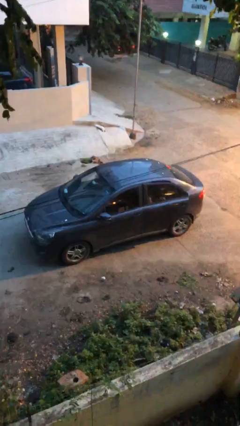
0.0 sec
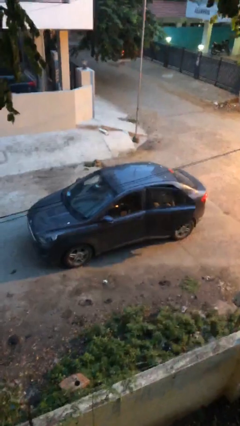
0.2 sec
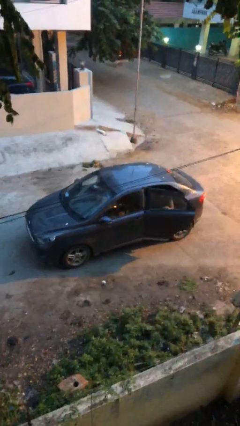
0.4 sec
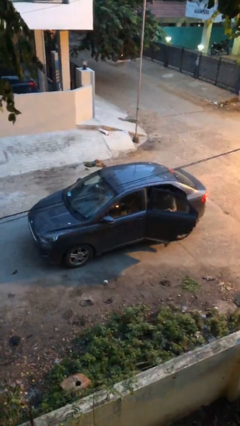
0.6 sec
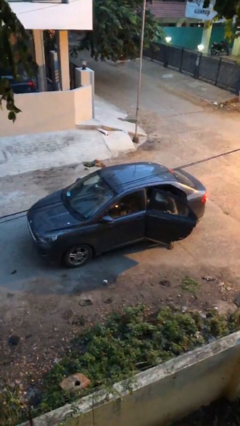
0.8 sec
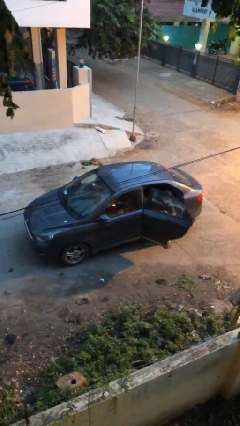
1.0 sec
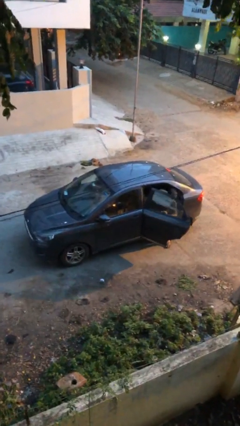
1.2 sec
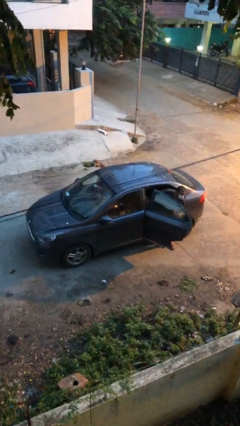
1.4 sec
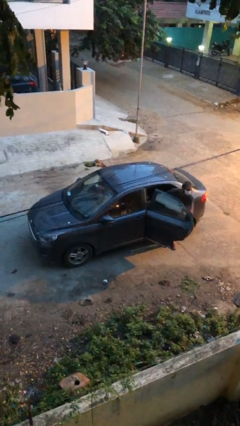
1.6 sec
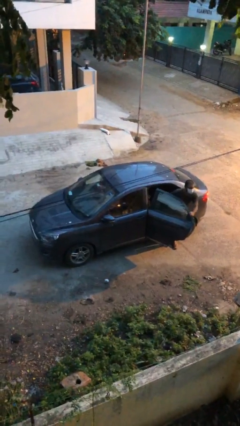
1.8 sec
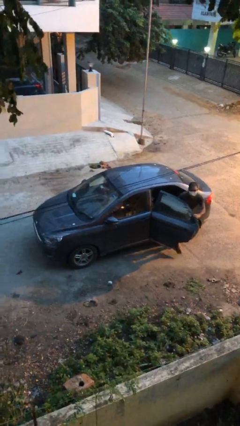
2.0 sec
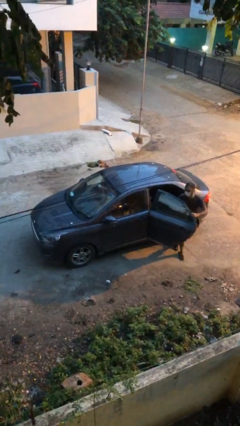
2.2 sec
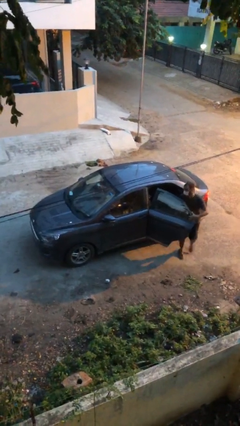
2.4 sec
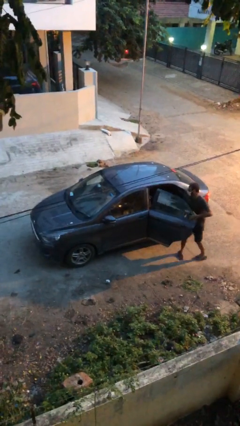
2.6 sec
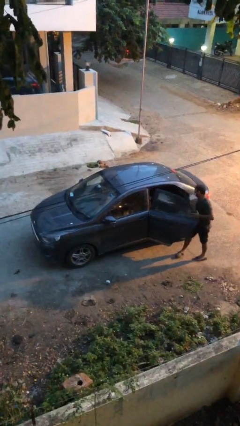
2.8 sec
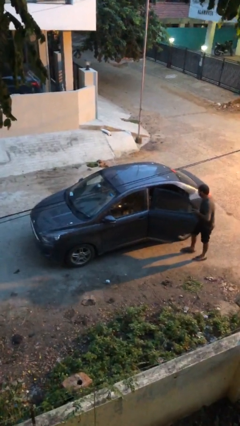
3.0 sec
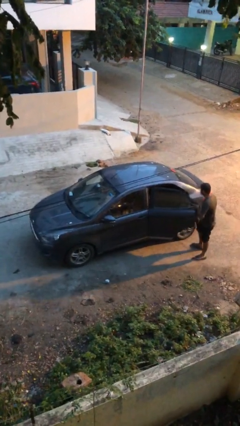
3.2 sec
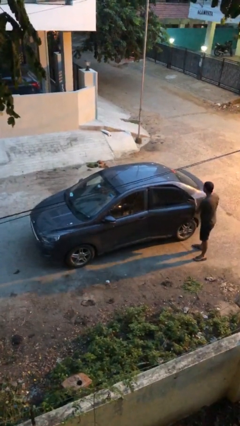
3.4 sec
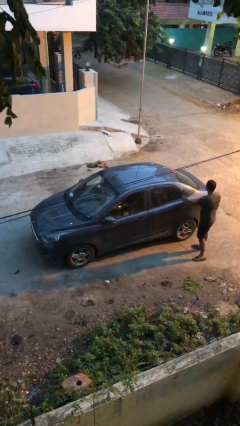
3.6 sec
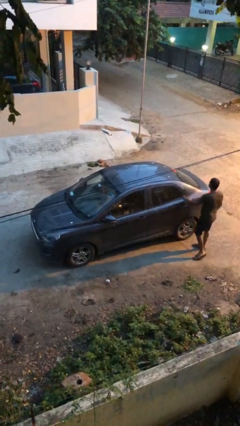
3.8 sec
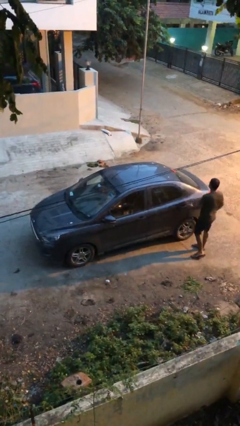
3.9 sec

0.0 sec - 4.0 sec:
car drops off person

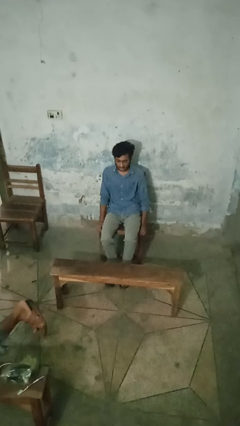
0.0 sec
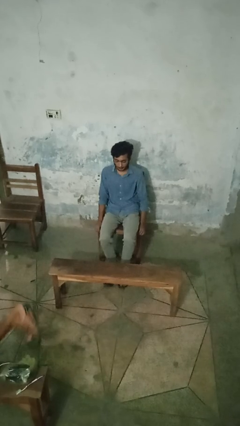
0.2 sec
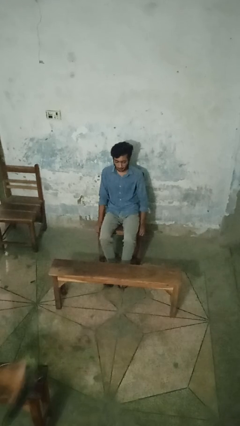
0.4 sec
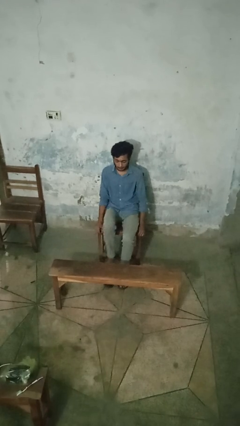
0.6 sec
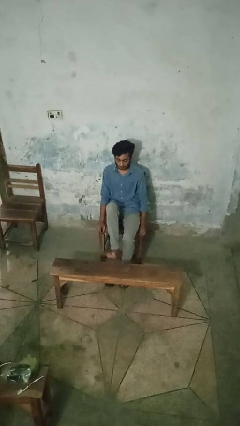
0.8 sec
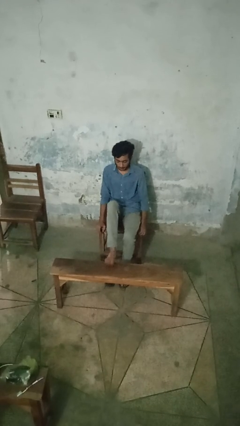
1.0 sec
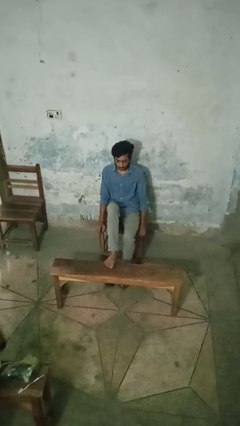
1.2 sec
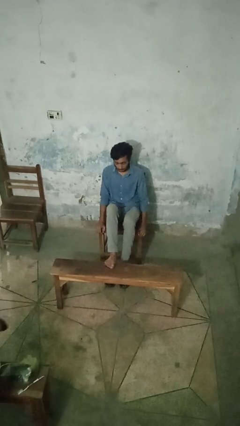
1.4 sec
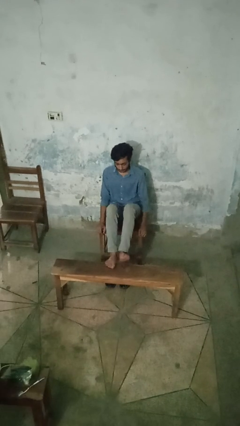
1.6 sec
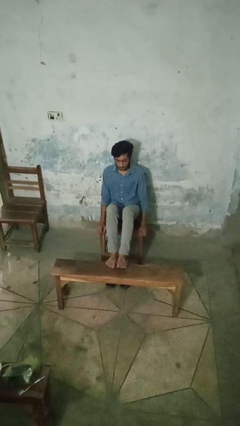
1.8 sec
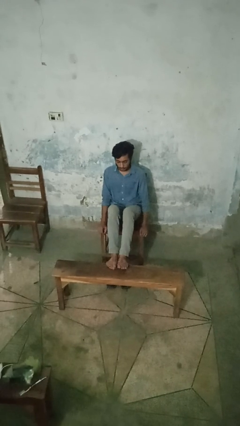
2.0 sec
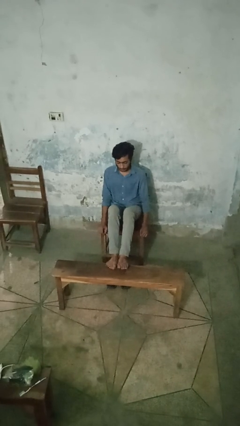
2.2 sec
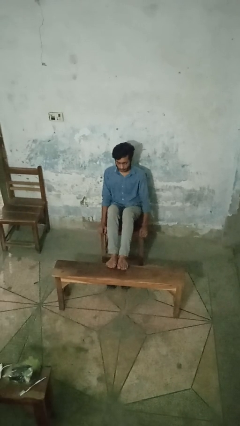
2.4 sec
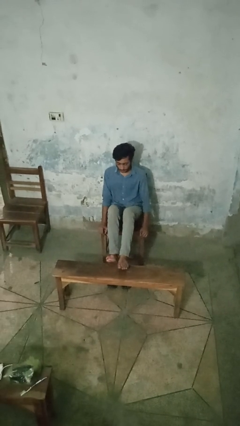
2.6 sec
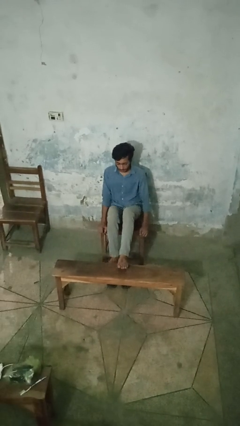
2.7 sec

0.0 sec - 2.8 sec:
person puts feet up

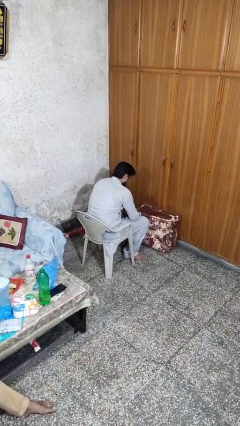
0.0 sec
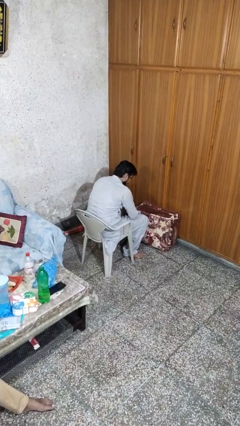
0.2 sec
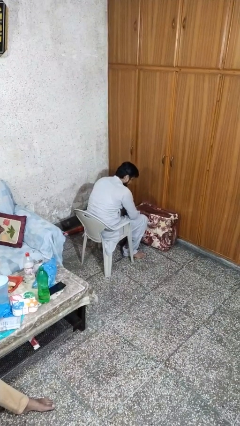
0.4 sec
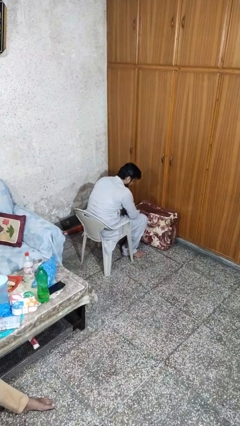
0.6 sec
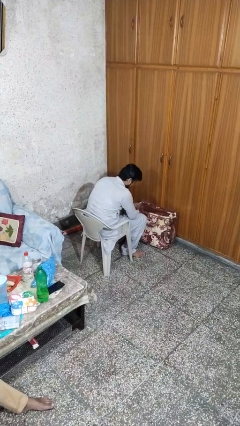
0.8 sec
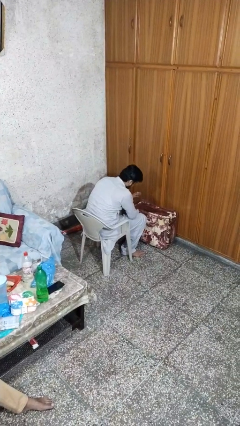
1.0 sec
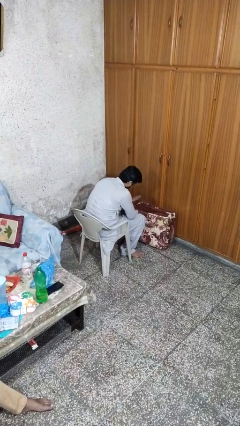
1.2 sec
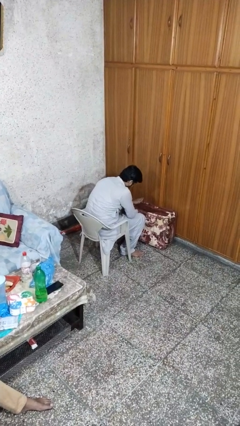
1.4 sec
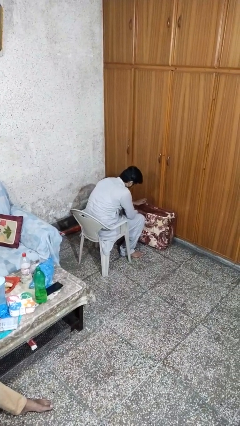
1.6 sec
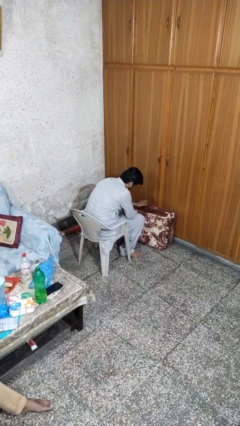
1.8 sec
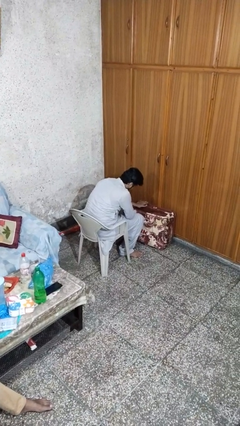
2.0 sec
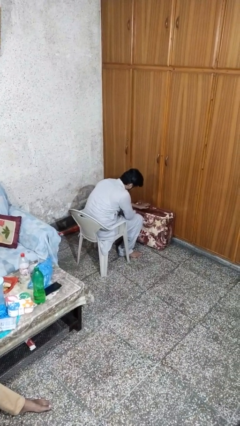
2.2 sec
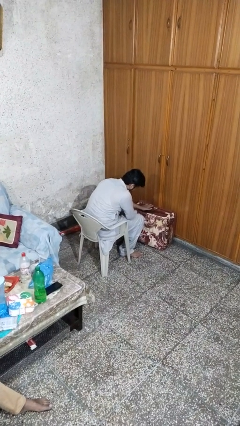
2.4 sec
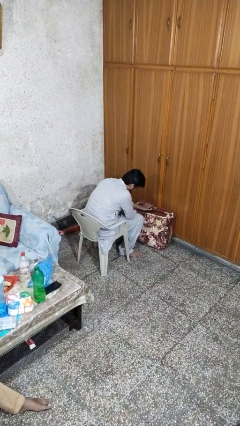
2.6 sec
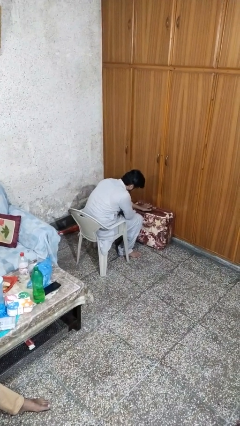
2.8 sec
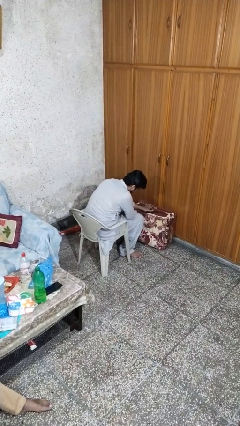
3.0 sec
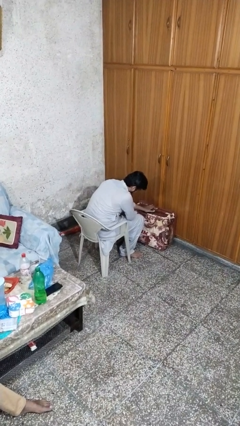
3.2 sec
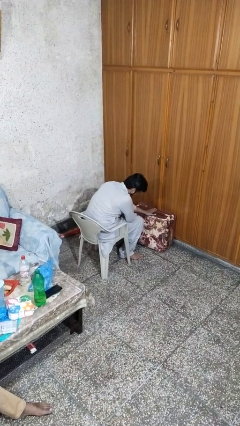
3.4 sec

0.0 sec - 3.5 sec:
person waves hand over object

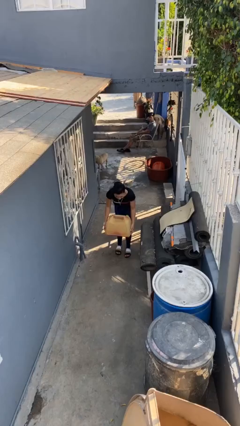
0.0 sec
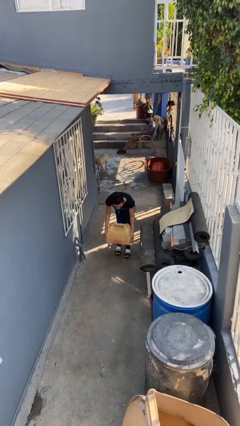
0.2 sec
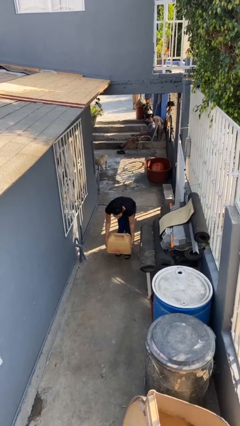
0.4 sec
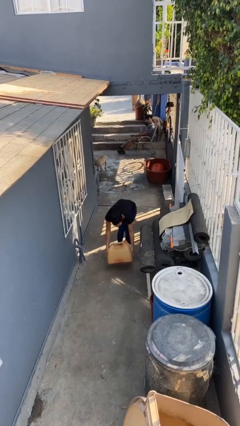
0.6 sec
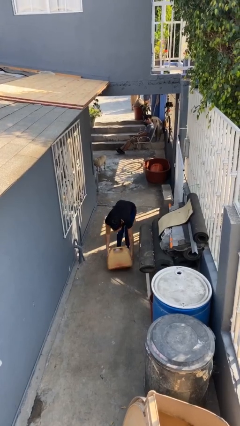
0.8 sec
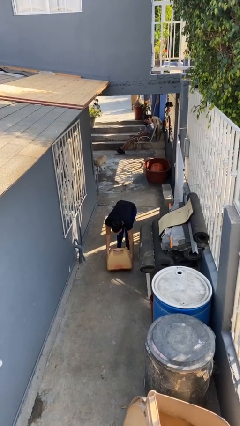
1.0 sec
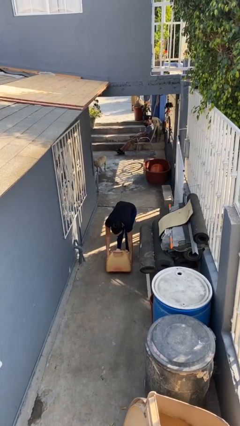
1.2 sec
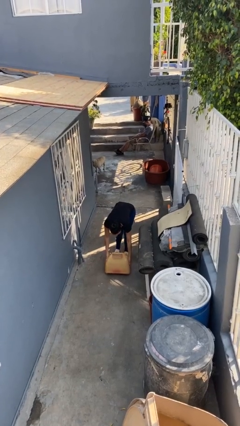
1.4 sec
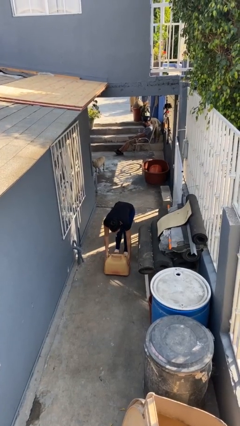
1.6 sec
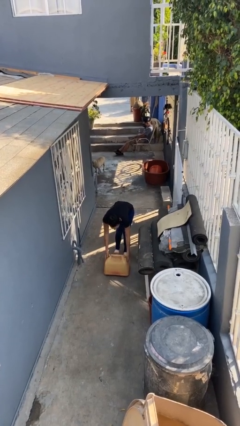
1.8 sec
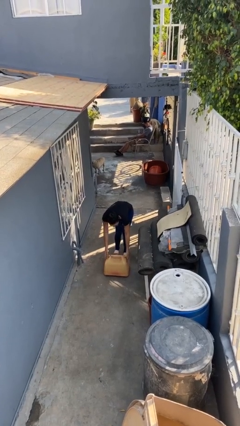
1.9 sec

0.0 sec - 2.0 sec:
person puts down object on floor

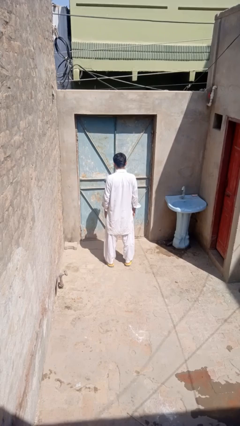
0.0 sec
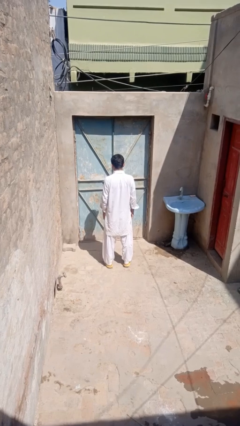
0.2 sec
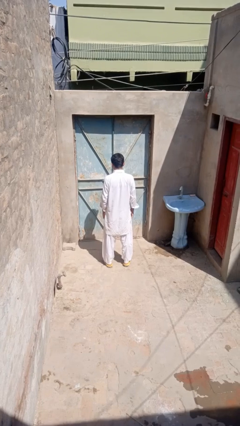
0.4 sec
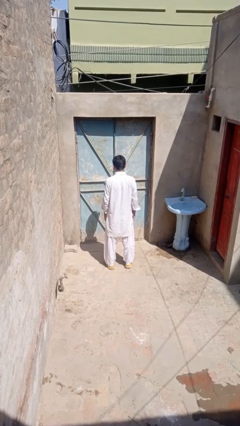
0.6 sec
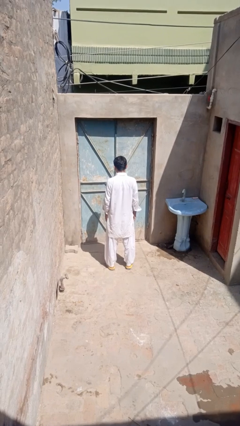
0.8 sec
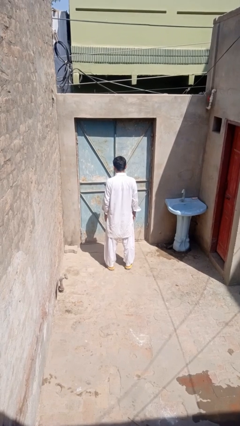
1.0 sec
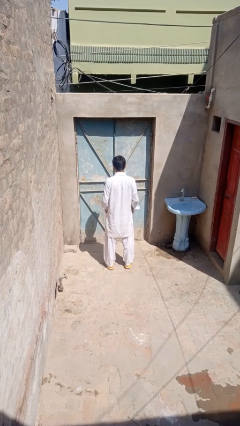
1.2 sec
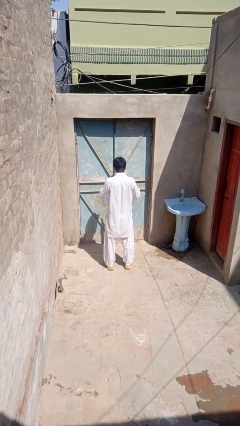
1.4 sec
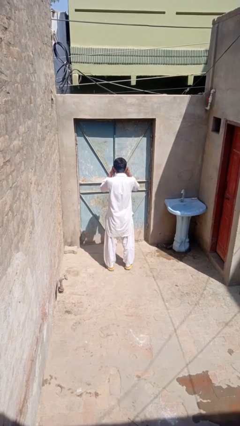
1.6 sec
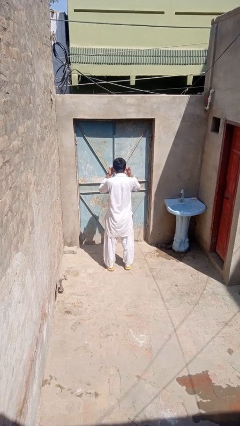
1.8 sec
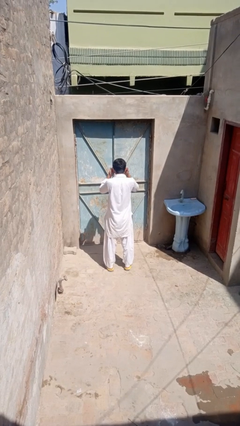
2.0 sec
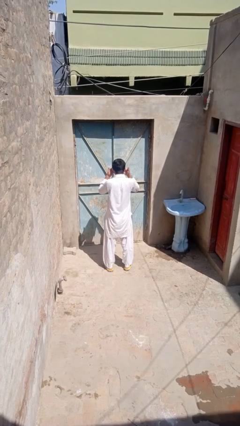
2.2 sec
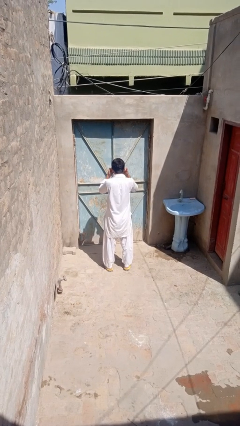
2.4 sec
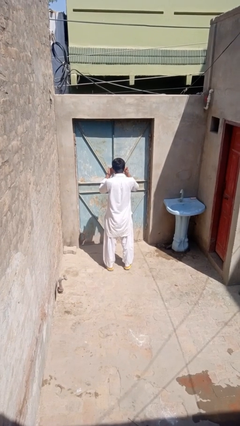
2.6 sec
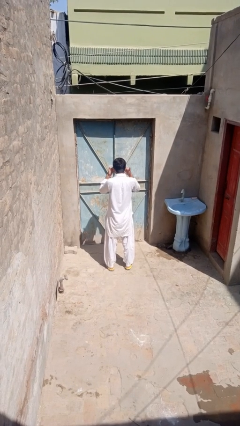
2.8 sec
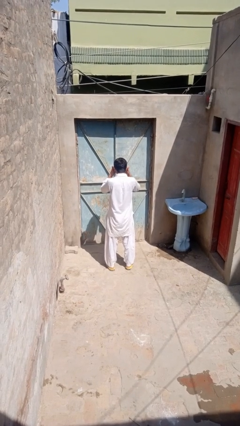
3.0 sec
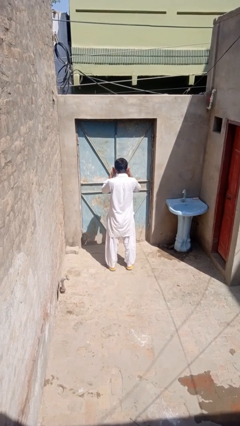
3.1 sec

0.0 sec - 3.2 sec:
person rubs eyes

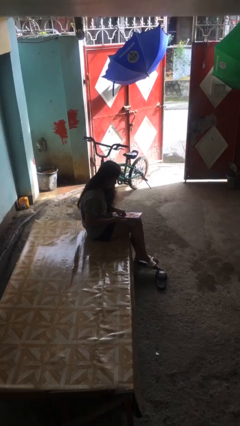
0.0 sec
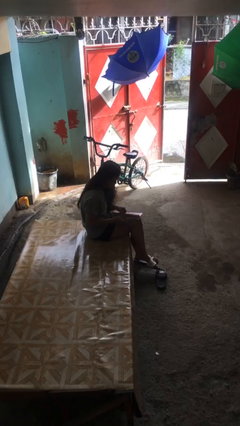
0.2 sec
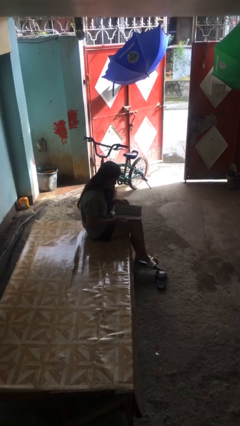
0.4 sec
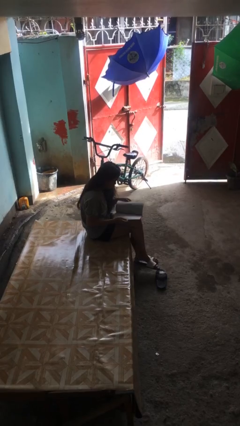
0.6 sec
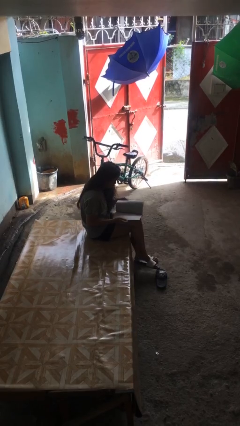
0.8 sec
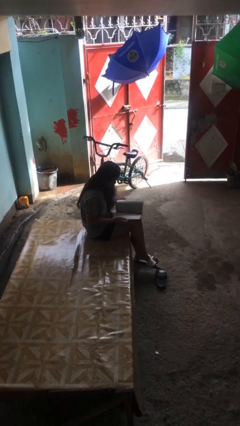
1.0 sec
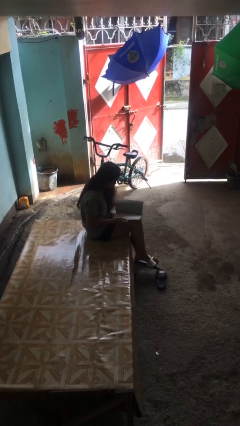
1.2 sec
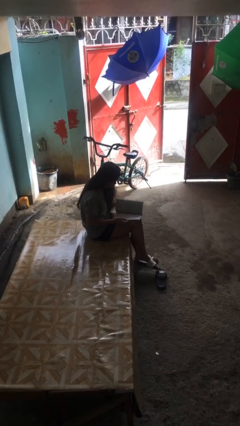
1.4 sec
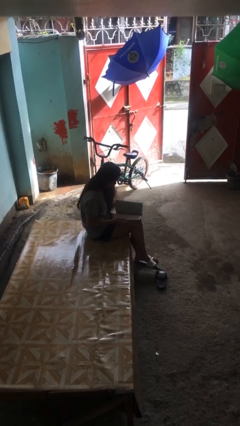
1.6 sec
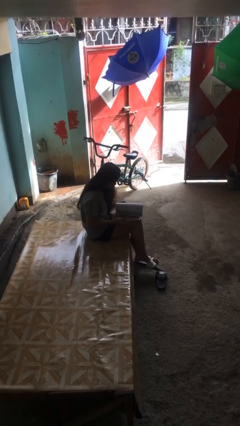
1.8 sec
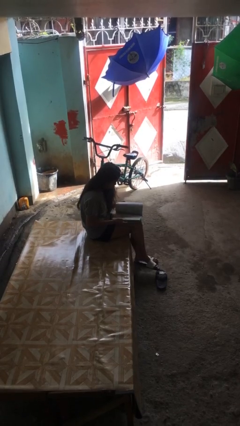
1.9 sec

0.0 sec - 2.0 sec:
person reads document
